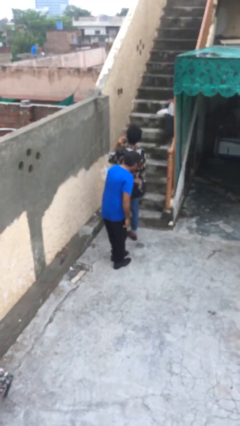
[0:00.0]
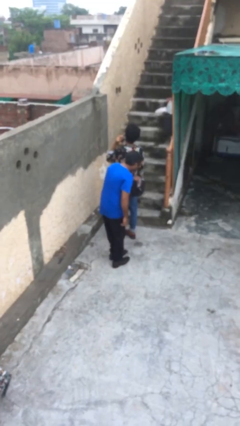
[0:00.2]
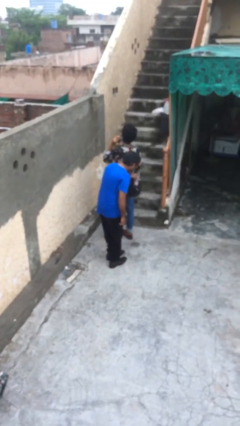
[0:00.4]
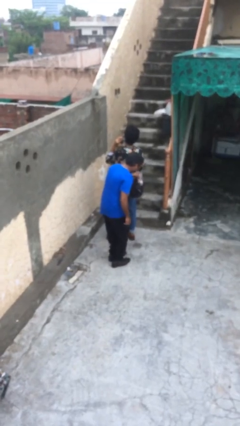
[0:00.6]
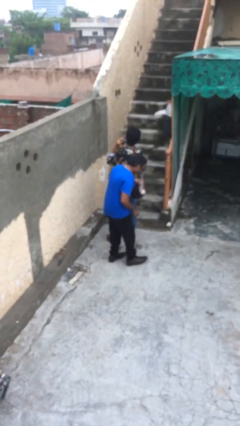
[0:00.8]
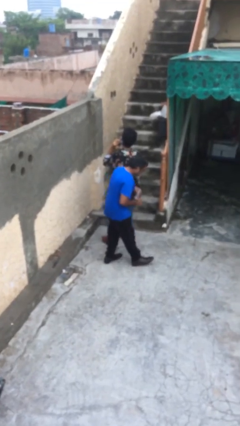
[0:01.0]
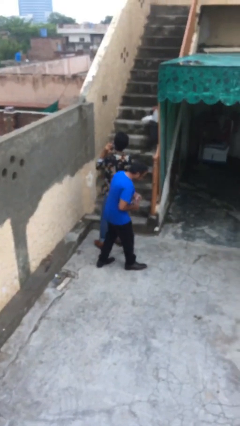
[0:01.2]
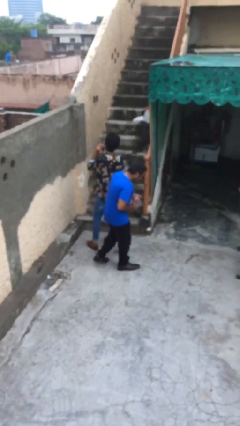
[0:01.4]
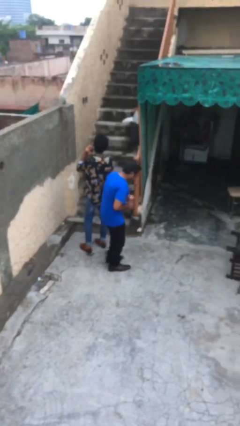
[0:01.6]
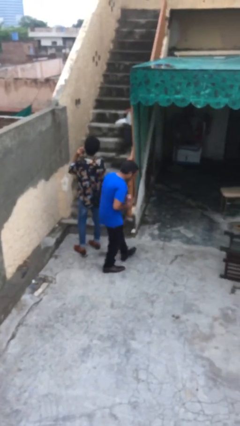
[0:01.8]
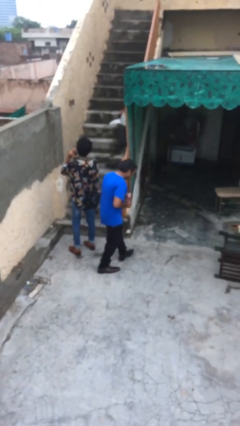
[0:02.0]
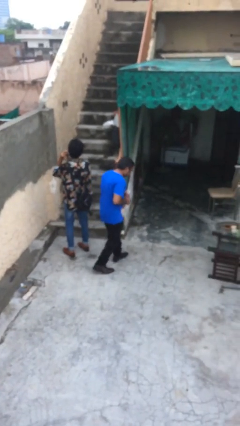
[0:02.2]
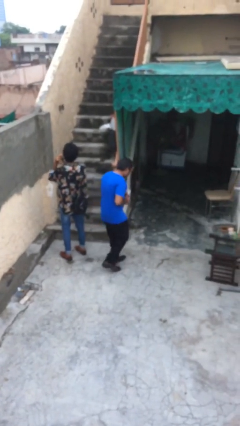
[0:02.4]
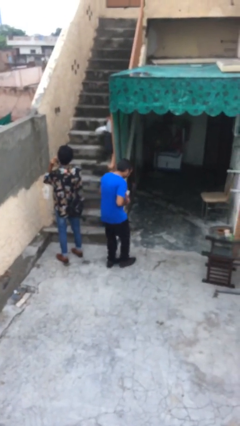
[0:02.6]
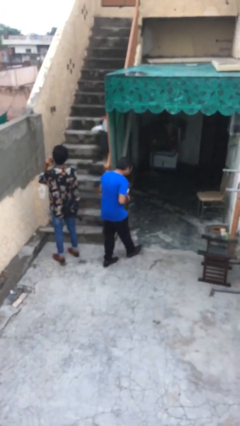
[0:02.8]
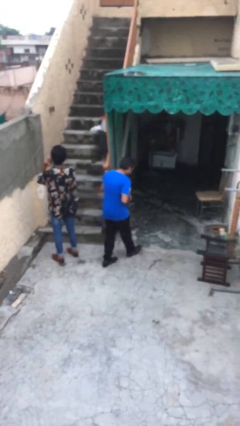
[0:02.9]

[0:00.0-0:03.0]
person steals object from person

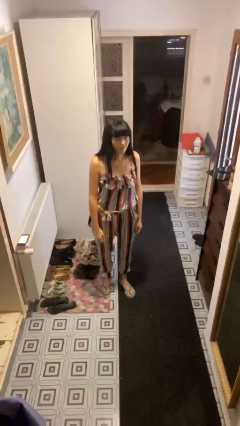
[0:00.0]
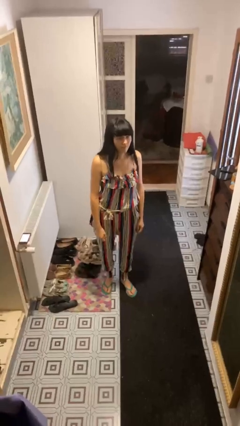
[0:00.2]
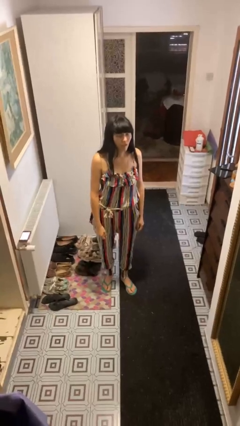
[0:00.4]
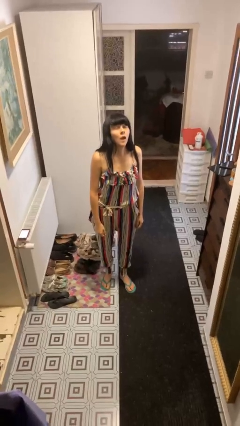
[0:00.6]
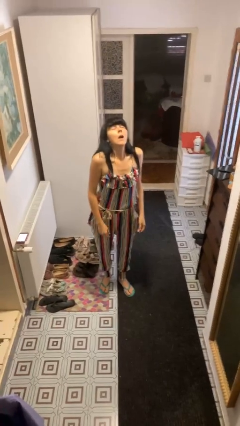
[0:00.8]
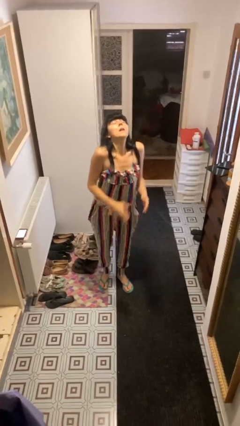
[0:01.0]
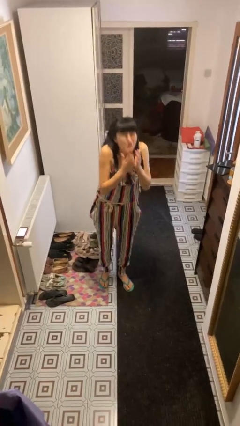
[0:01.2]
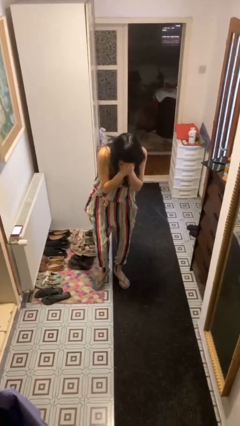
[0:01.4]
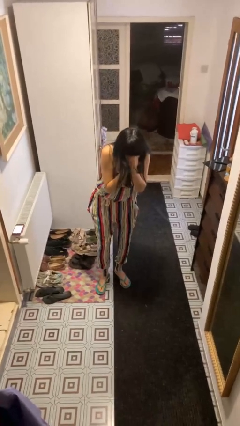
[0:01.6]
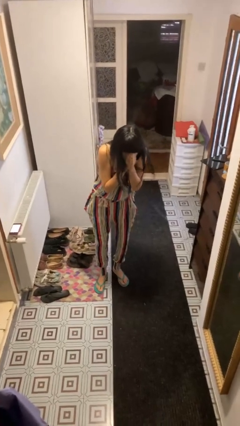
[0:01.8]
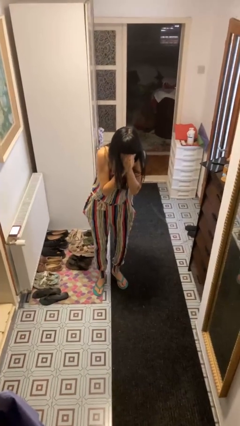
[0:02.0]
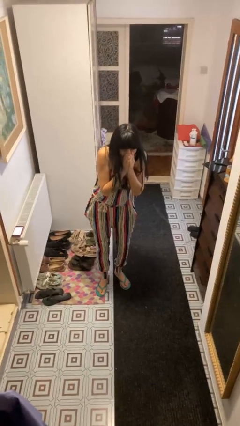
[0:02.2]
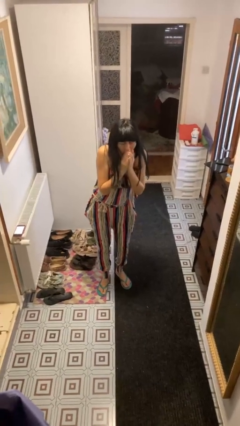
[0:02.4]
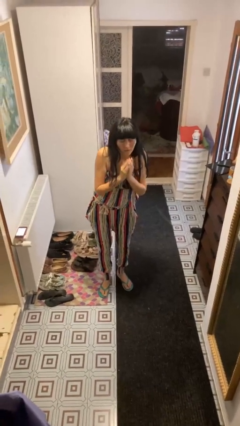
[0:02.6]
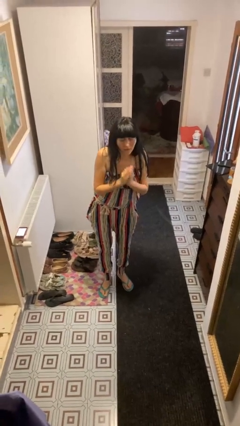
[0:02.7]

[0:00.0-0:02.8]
person sneezes into hand

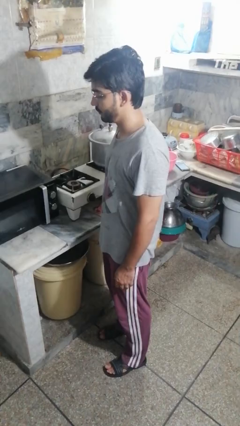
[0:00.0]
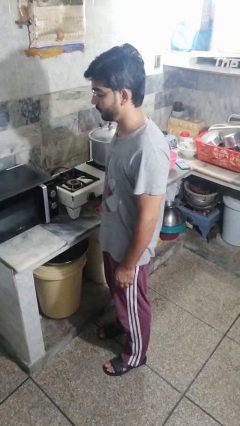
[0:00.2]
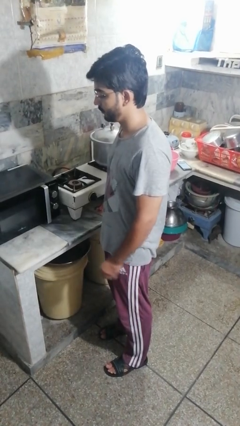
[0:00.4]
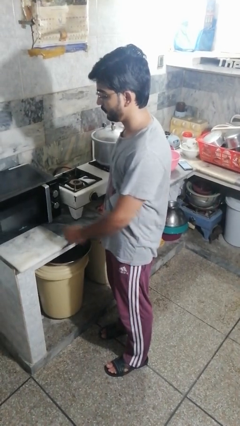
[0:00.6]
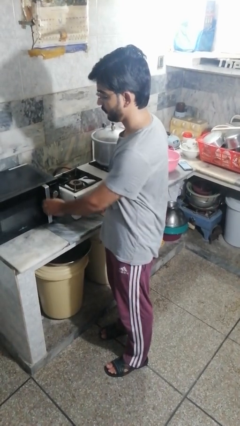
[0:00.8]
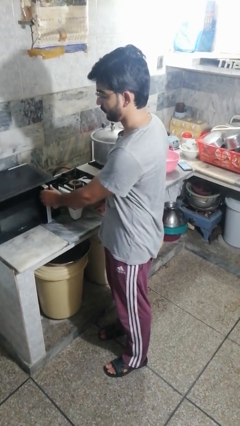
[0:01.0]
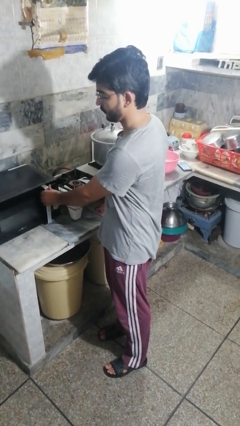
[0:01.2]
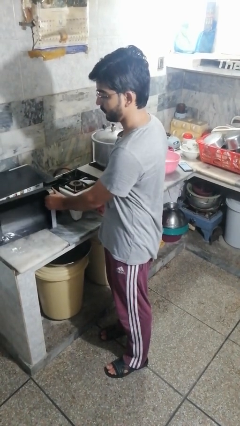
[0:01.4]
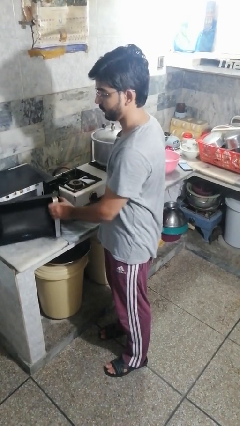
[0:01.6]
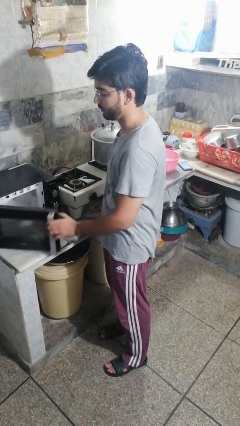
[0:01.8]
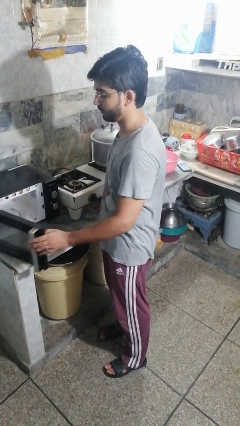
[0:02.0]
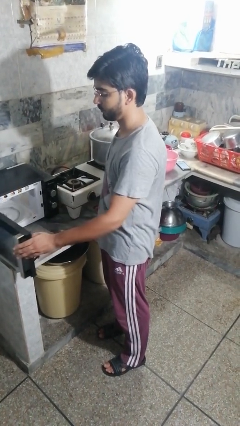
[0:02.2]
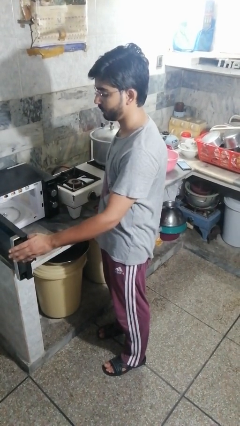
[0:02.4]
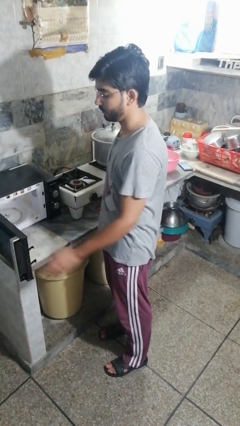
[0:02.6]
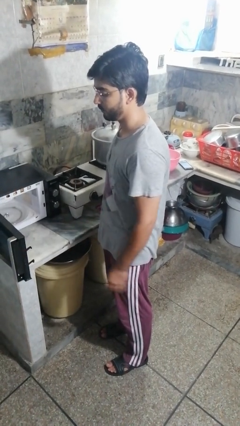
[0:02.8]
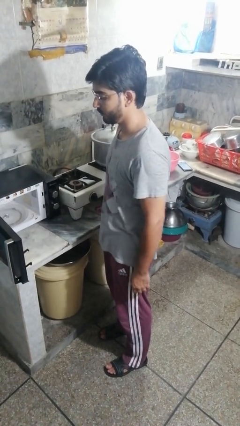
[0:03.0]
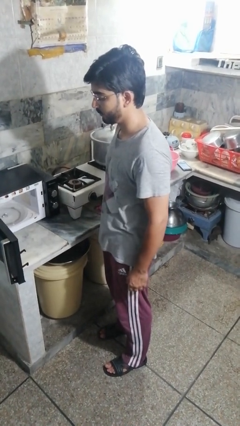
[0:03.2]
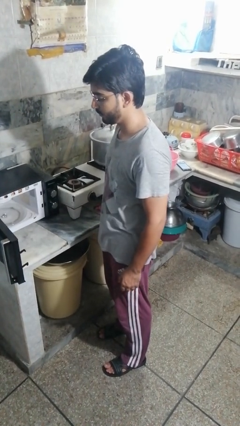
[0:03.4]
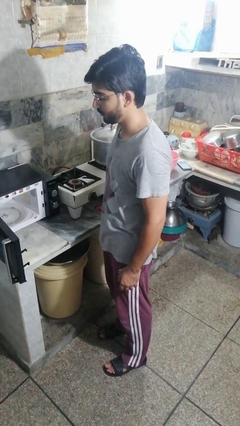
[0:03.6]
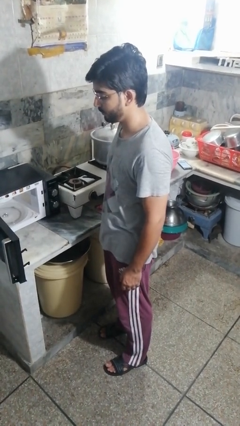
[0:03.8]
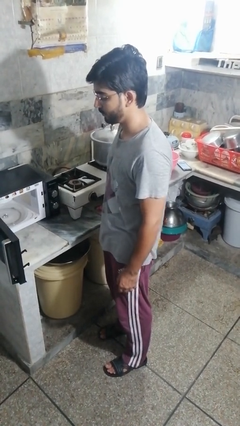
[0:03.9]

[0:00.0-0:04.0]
person opens oven door

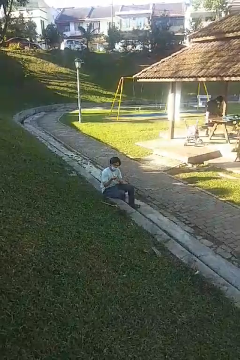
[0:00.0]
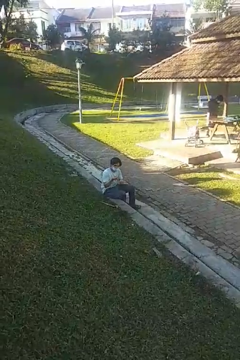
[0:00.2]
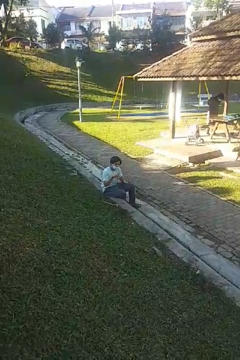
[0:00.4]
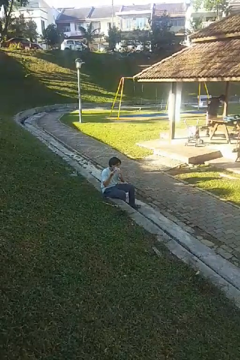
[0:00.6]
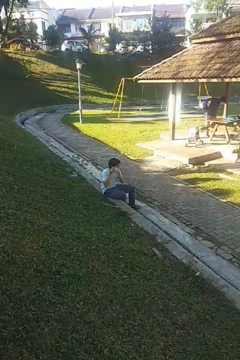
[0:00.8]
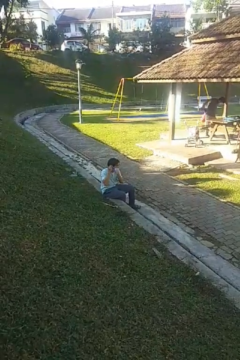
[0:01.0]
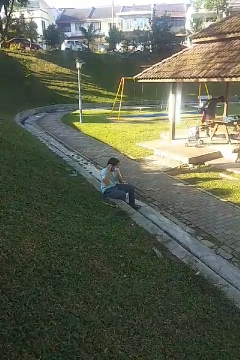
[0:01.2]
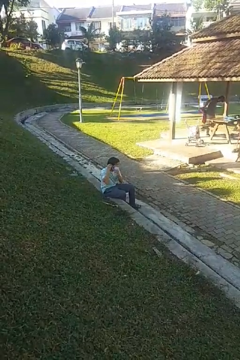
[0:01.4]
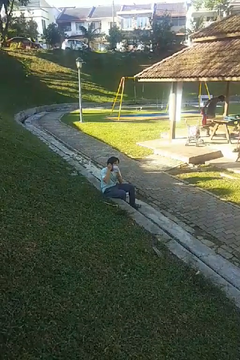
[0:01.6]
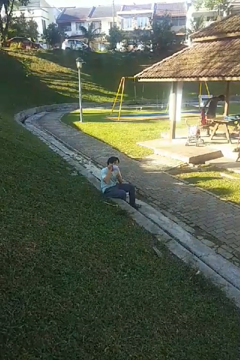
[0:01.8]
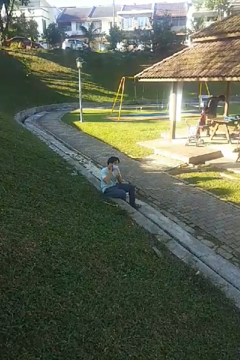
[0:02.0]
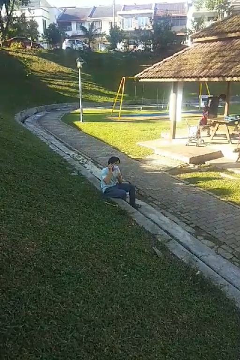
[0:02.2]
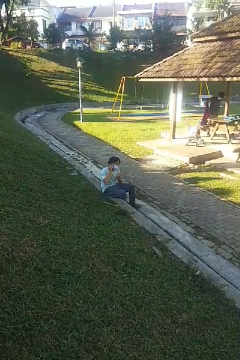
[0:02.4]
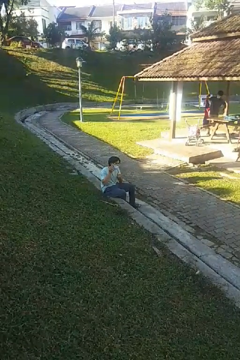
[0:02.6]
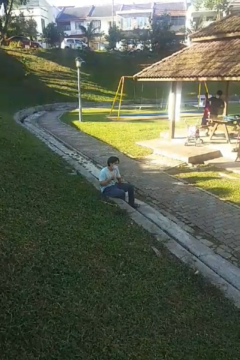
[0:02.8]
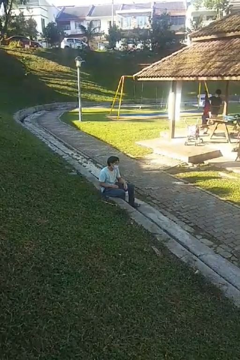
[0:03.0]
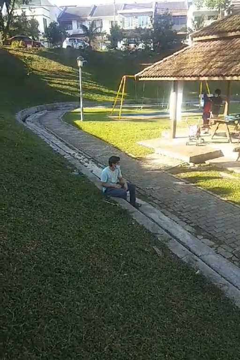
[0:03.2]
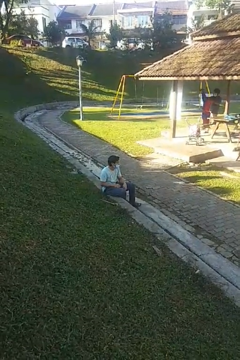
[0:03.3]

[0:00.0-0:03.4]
person puts on earrings

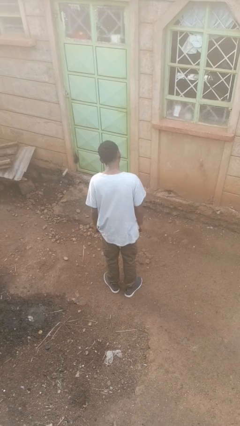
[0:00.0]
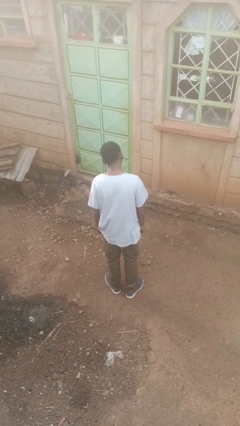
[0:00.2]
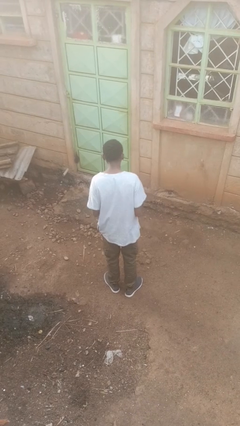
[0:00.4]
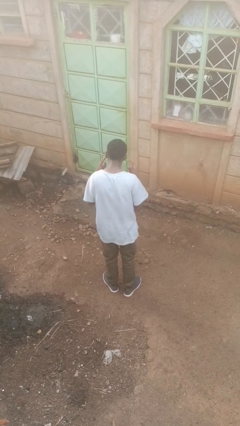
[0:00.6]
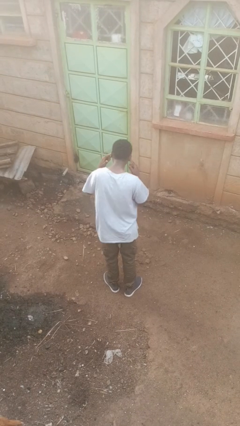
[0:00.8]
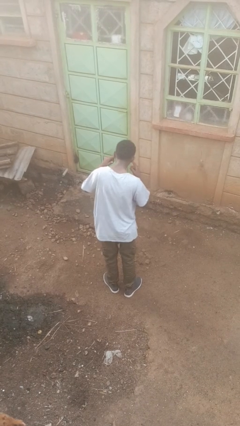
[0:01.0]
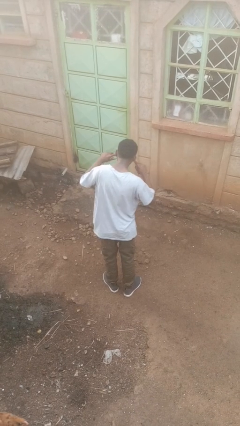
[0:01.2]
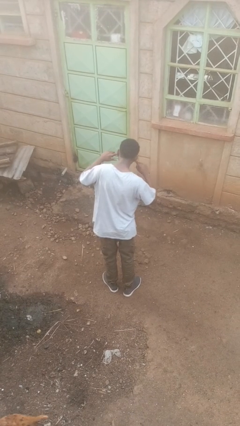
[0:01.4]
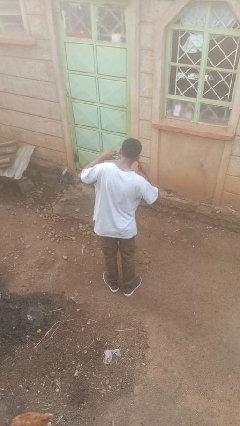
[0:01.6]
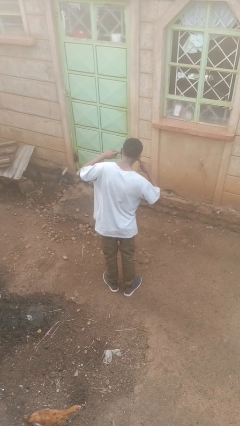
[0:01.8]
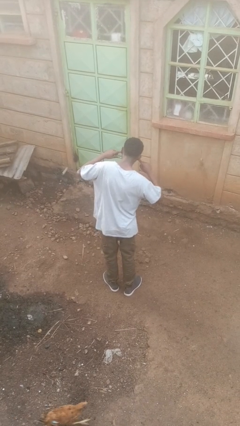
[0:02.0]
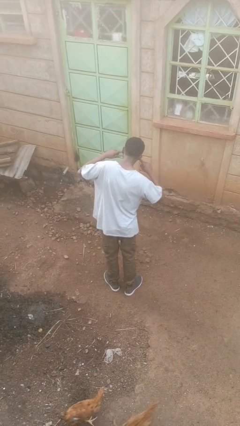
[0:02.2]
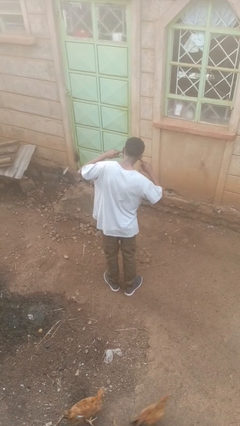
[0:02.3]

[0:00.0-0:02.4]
person puts fingers in ear

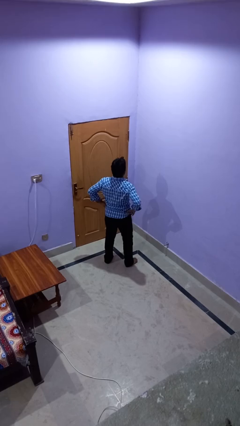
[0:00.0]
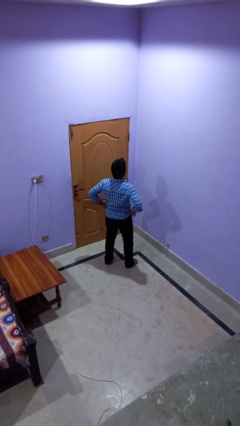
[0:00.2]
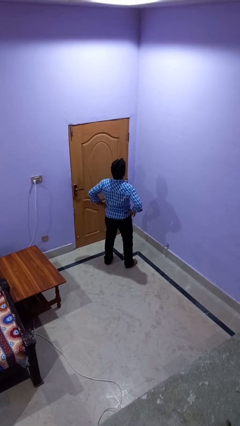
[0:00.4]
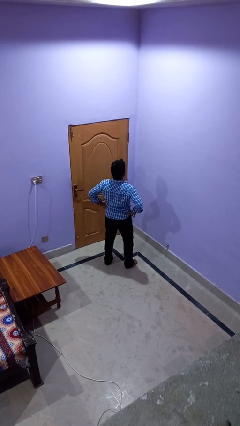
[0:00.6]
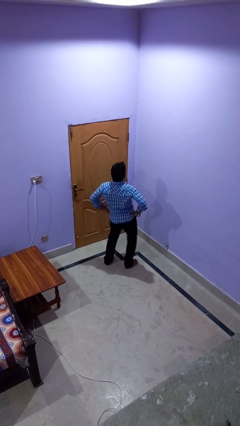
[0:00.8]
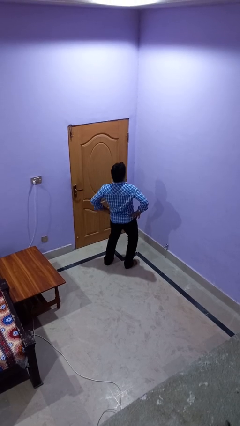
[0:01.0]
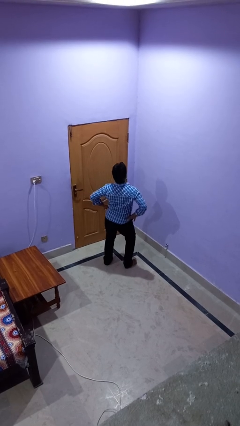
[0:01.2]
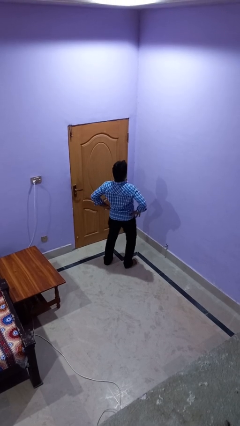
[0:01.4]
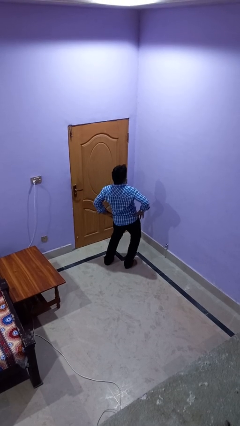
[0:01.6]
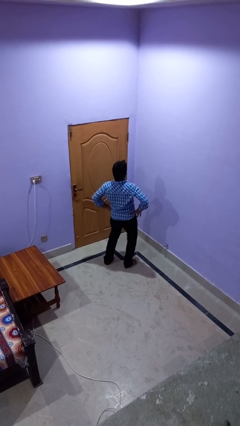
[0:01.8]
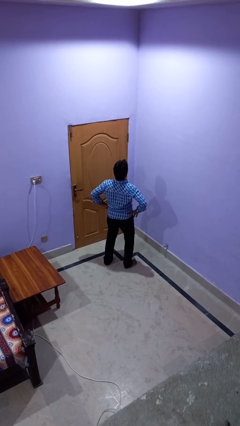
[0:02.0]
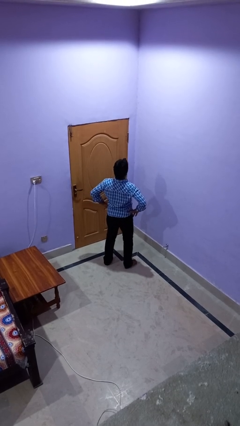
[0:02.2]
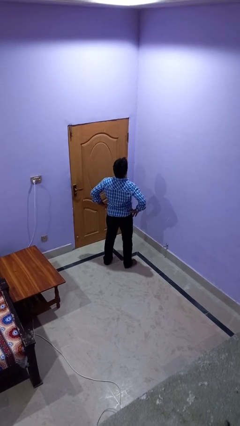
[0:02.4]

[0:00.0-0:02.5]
person dances in place

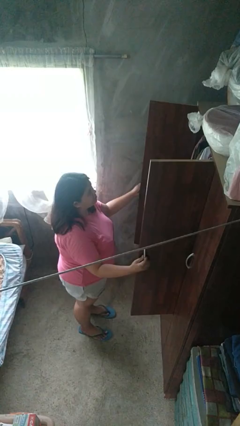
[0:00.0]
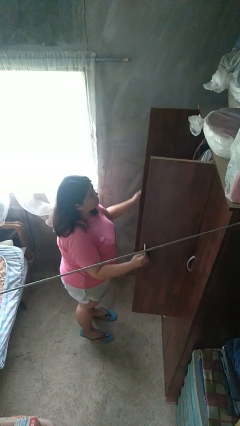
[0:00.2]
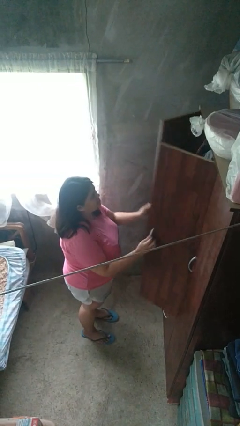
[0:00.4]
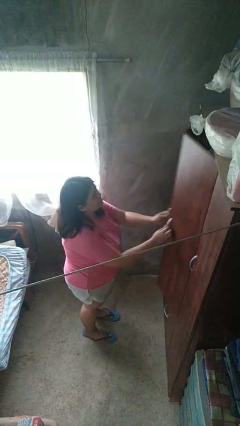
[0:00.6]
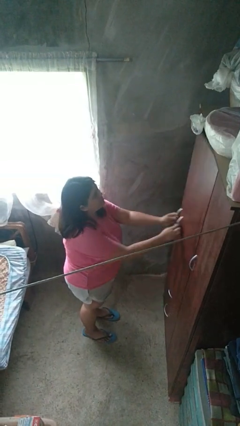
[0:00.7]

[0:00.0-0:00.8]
person closes closet door
